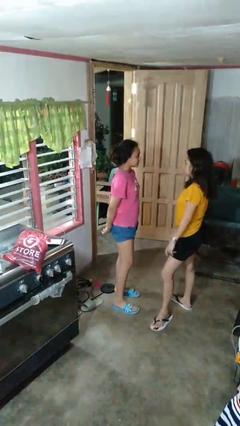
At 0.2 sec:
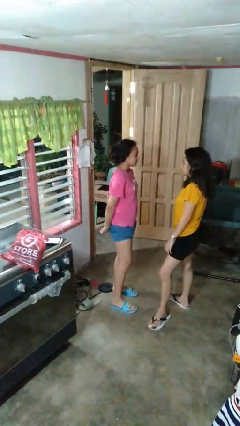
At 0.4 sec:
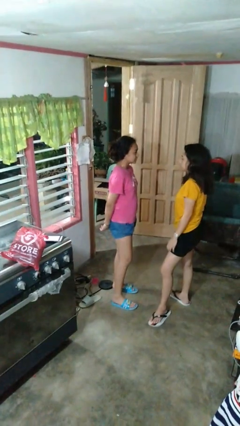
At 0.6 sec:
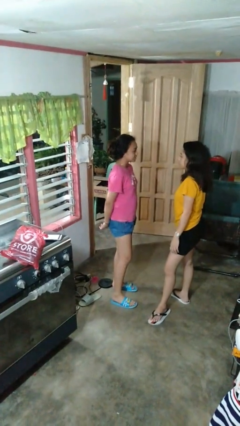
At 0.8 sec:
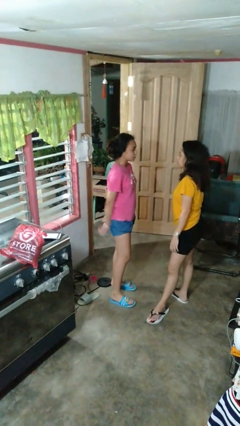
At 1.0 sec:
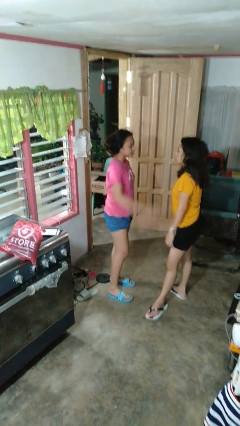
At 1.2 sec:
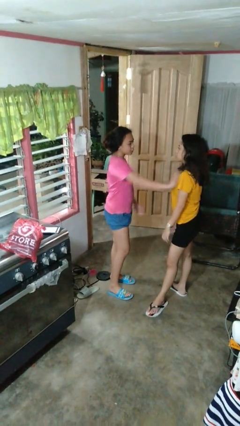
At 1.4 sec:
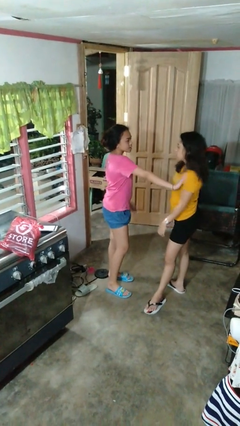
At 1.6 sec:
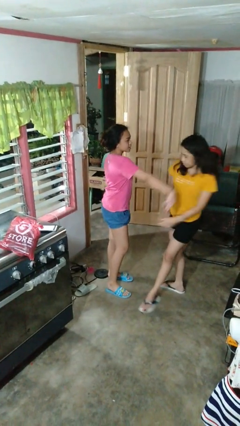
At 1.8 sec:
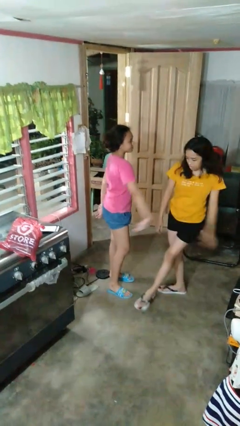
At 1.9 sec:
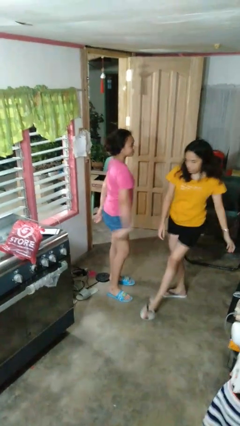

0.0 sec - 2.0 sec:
person shoves person

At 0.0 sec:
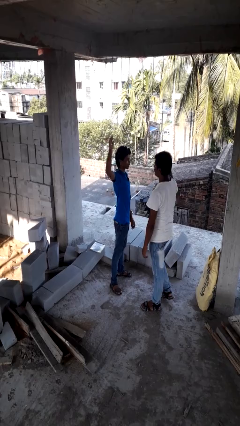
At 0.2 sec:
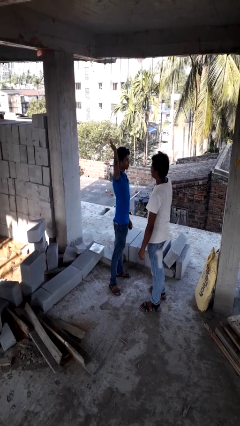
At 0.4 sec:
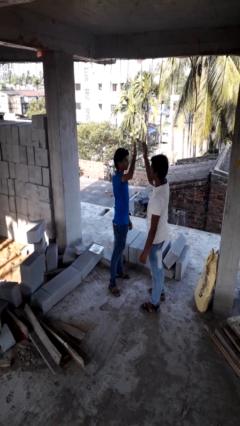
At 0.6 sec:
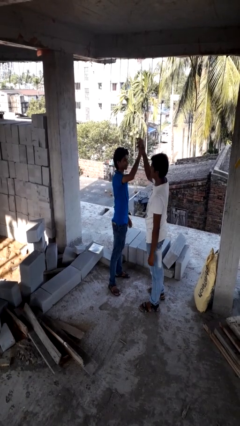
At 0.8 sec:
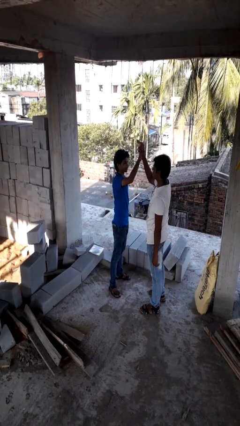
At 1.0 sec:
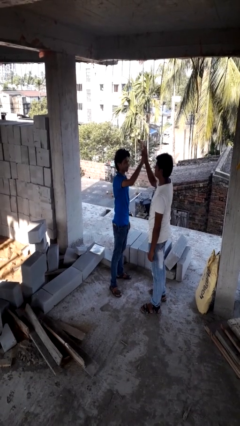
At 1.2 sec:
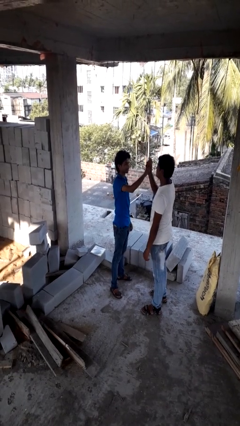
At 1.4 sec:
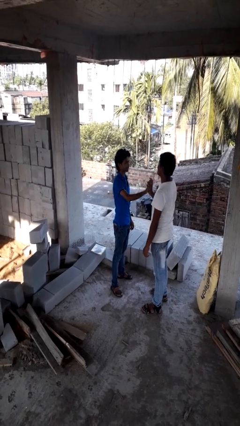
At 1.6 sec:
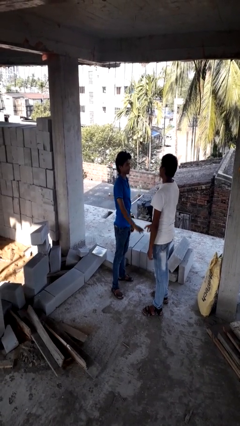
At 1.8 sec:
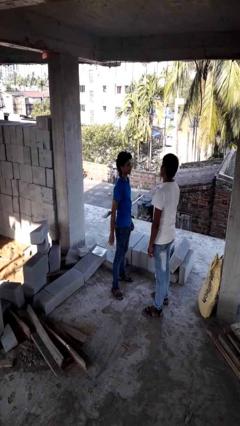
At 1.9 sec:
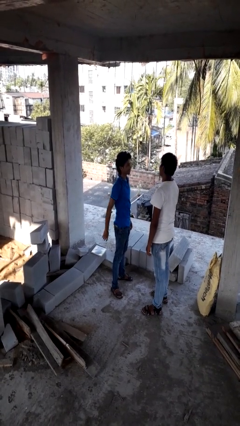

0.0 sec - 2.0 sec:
person highfives hand

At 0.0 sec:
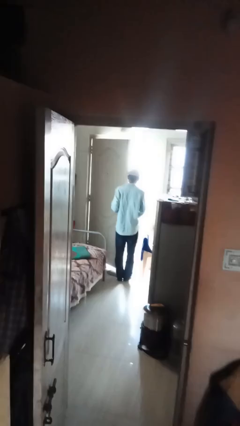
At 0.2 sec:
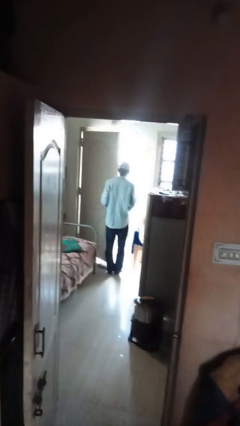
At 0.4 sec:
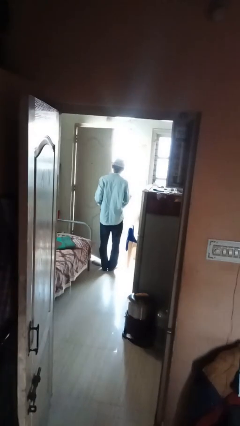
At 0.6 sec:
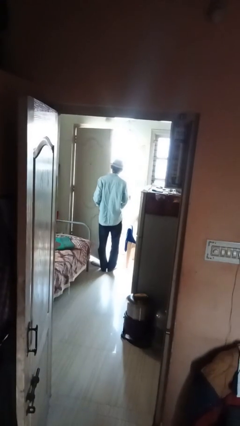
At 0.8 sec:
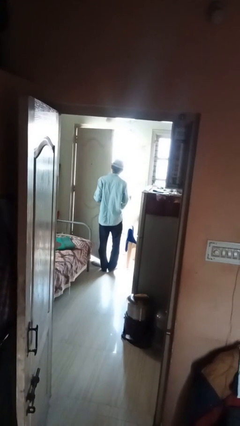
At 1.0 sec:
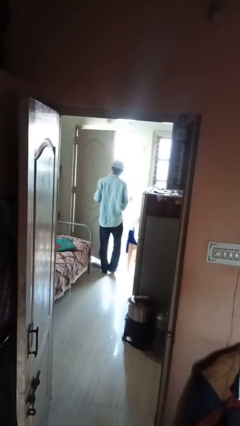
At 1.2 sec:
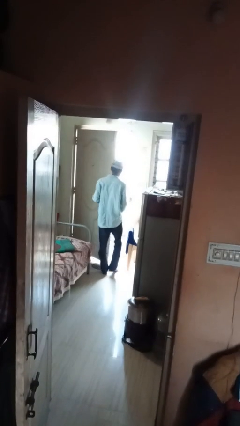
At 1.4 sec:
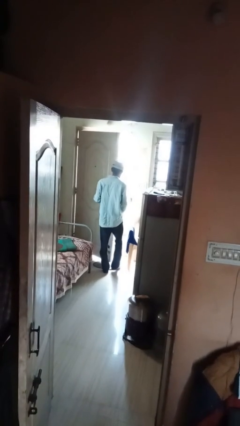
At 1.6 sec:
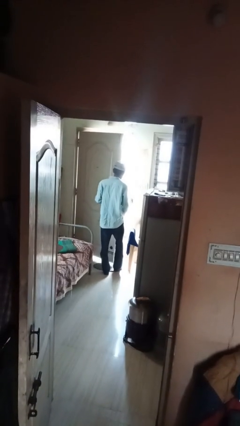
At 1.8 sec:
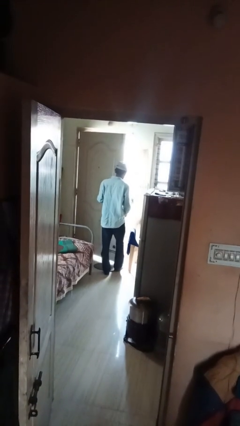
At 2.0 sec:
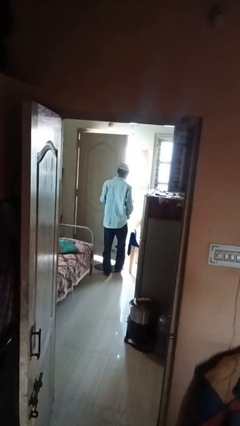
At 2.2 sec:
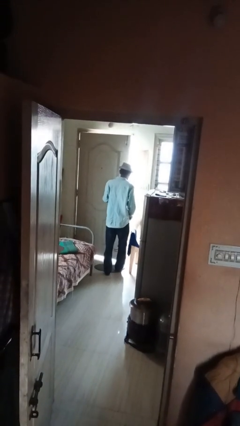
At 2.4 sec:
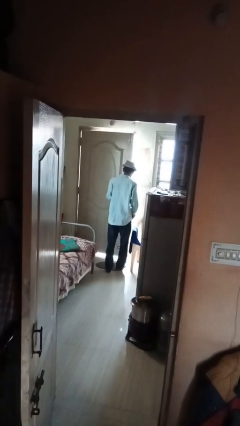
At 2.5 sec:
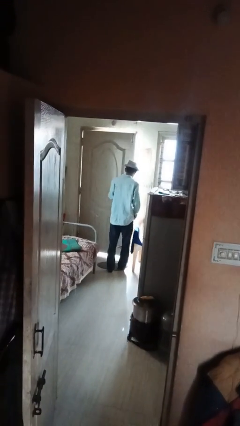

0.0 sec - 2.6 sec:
person opens facility door

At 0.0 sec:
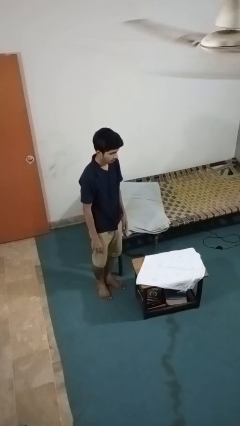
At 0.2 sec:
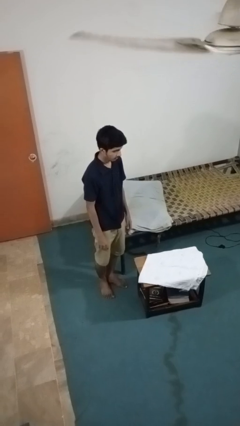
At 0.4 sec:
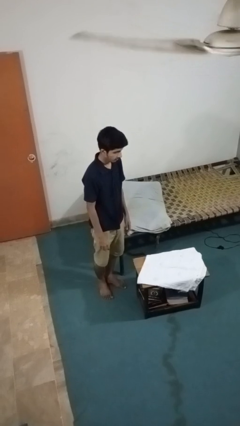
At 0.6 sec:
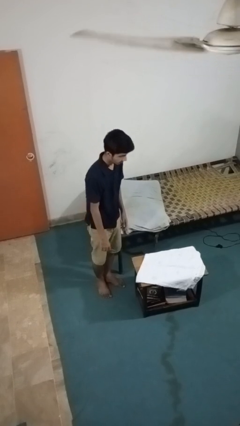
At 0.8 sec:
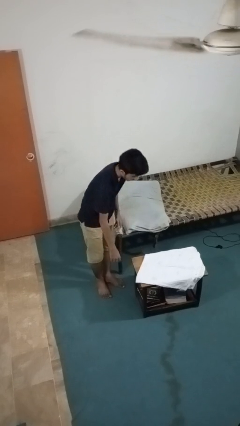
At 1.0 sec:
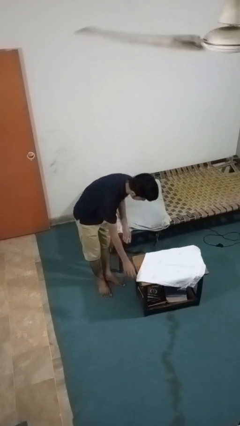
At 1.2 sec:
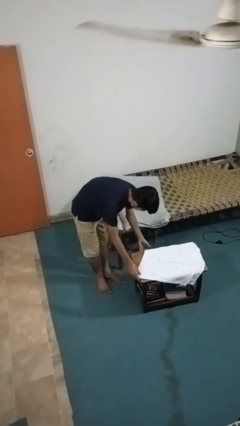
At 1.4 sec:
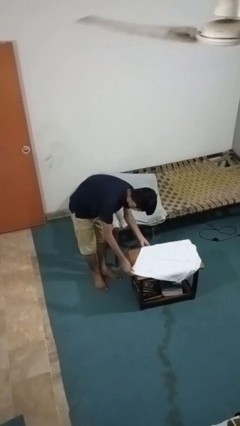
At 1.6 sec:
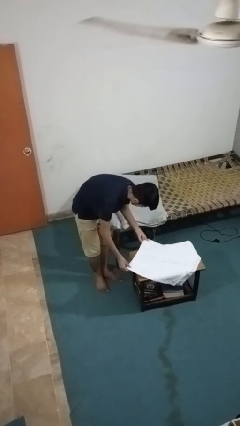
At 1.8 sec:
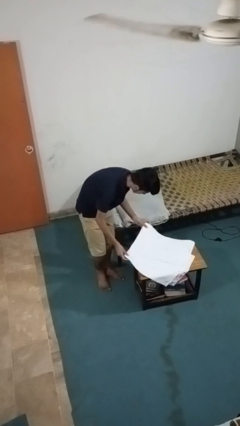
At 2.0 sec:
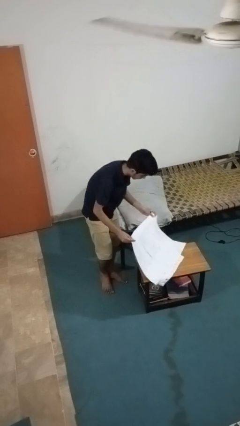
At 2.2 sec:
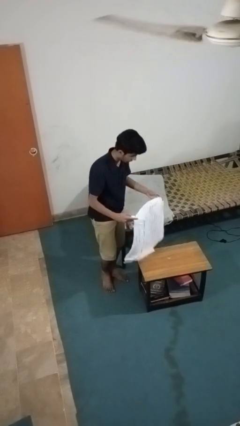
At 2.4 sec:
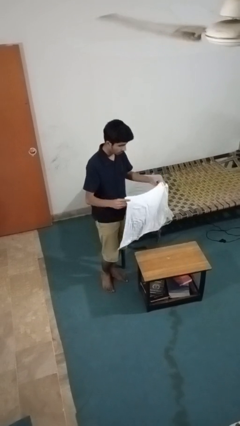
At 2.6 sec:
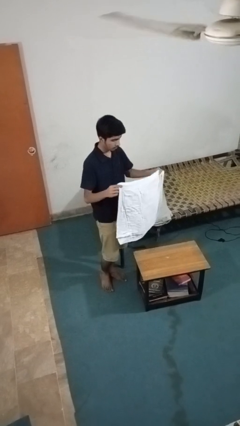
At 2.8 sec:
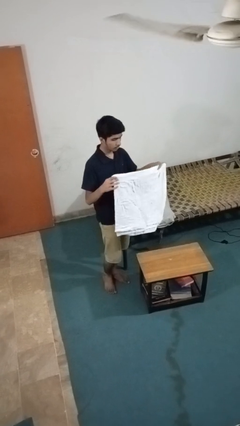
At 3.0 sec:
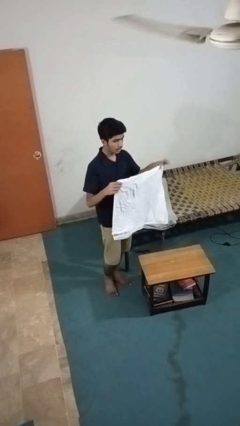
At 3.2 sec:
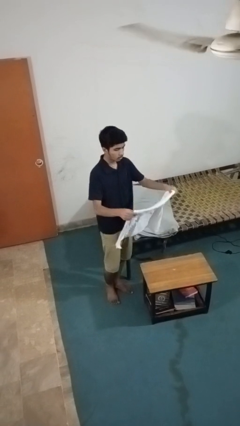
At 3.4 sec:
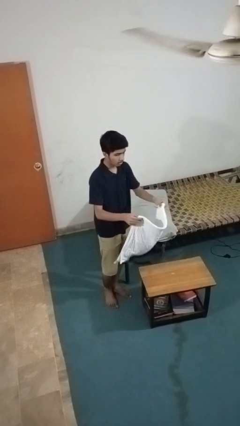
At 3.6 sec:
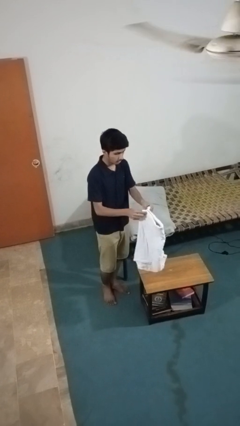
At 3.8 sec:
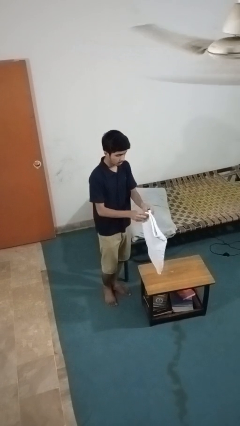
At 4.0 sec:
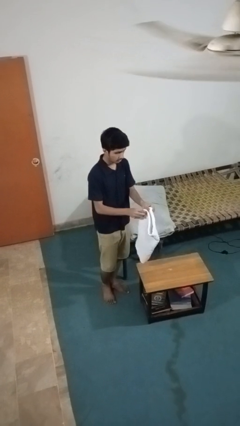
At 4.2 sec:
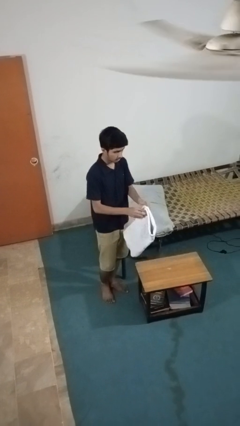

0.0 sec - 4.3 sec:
person folds tablecloth

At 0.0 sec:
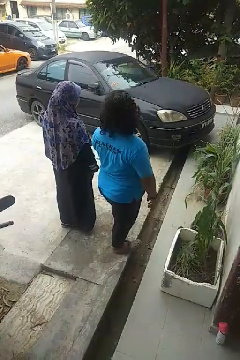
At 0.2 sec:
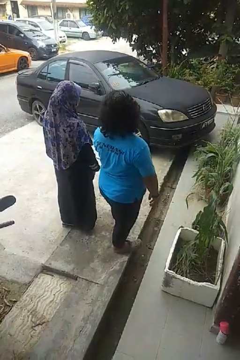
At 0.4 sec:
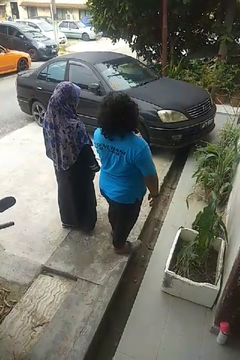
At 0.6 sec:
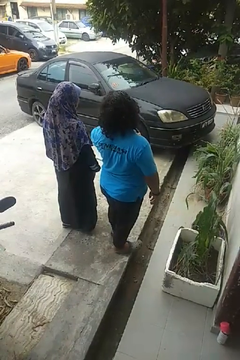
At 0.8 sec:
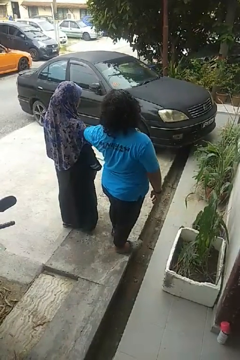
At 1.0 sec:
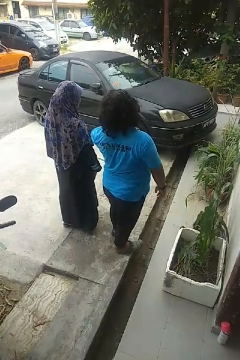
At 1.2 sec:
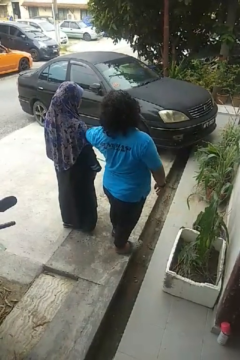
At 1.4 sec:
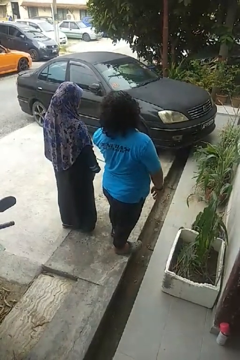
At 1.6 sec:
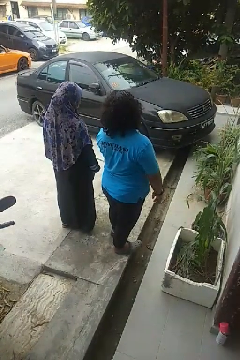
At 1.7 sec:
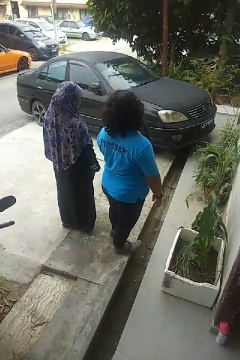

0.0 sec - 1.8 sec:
person nudges person with elbow

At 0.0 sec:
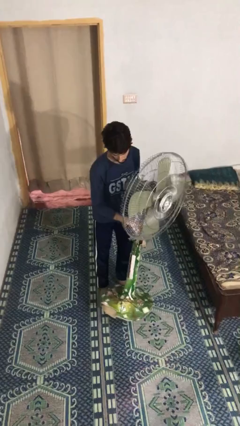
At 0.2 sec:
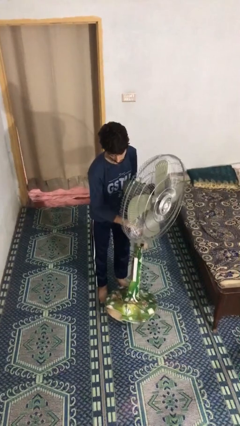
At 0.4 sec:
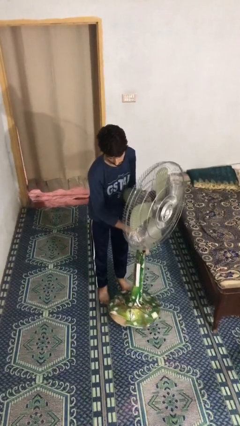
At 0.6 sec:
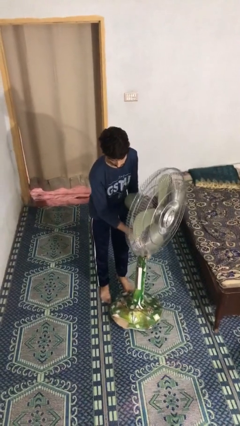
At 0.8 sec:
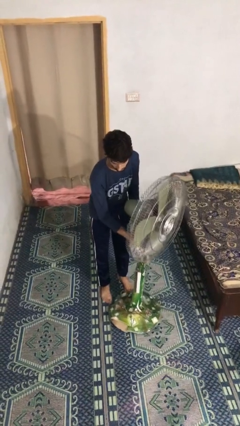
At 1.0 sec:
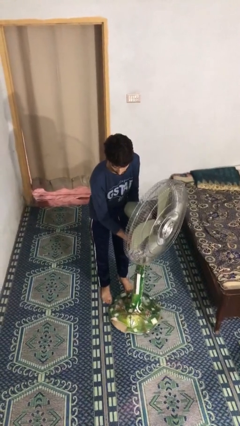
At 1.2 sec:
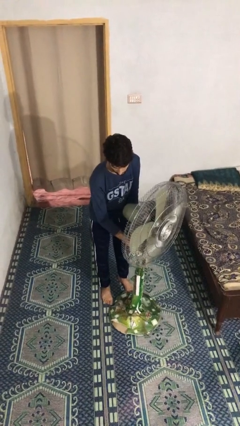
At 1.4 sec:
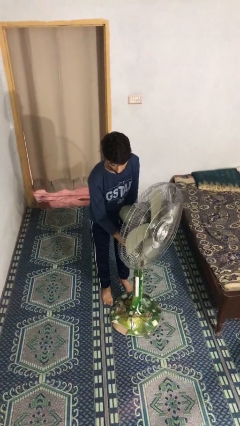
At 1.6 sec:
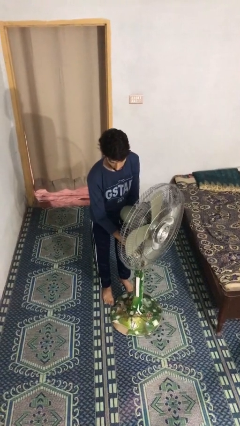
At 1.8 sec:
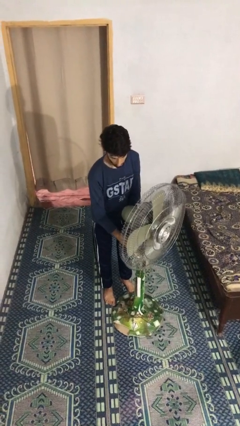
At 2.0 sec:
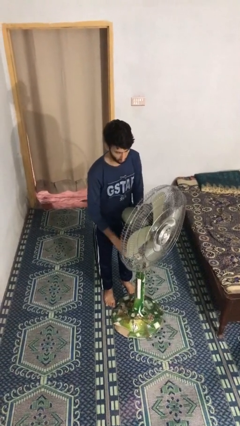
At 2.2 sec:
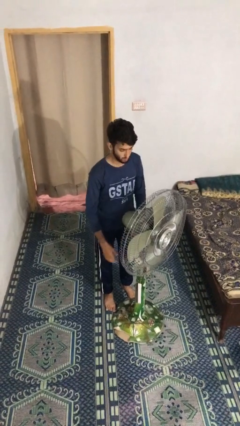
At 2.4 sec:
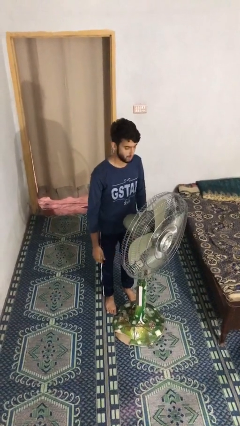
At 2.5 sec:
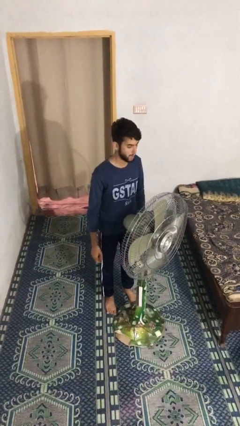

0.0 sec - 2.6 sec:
person puts down object on floor

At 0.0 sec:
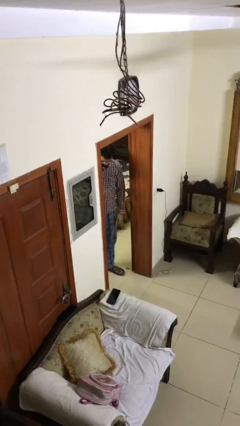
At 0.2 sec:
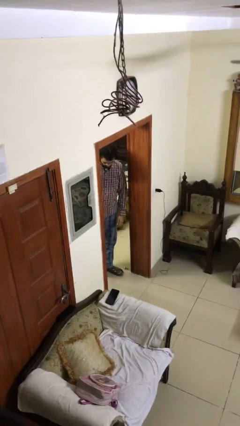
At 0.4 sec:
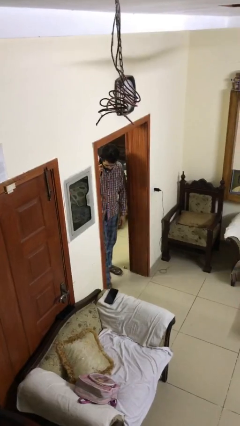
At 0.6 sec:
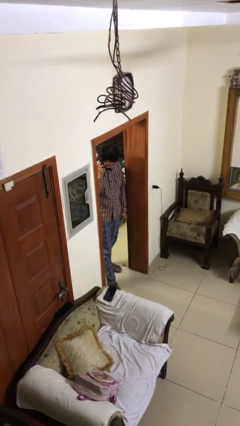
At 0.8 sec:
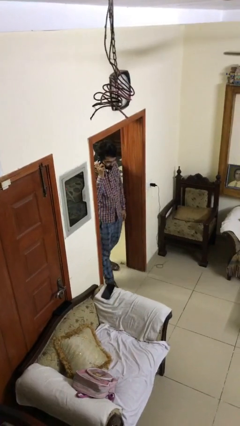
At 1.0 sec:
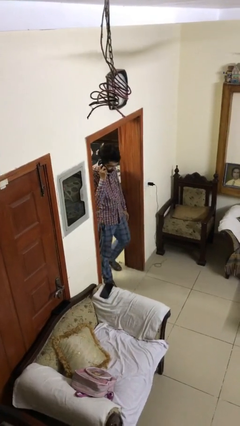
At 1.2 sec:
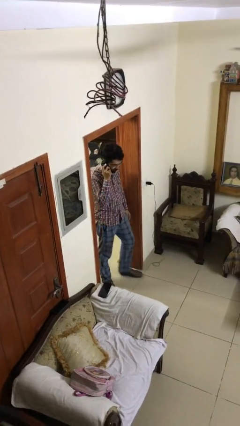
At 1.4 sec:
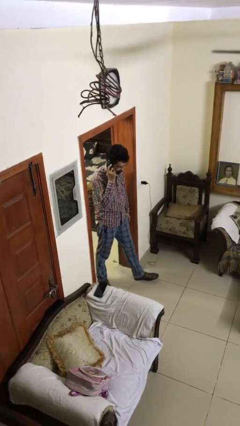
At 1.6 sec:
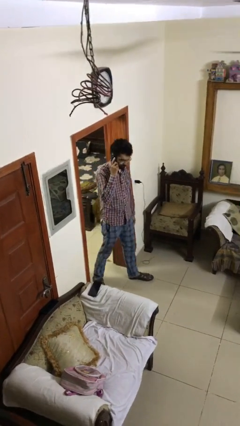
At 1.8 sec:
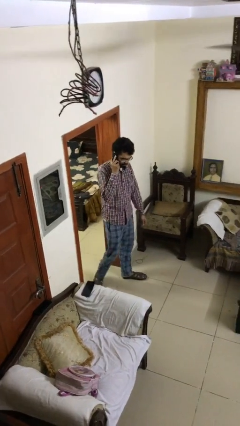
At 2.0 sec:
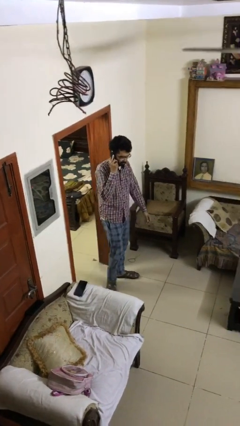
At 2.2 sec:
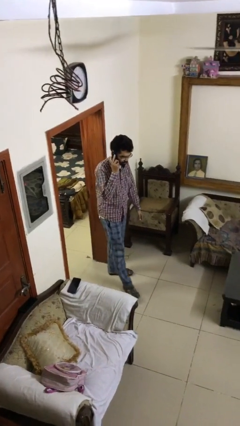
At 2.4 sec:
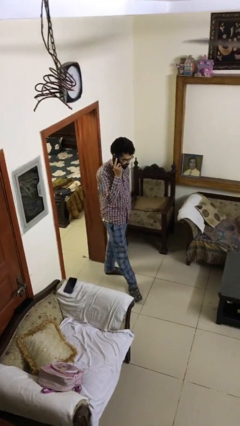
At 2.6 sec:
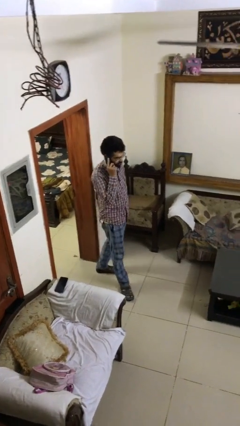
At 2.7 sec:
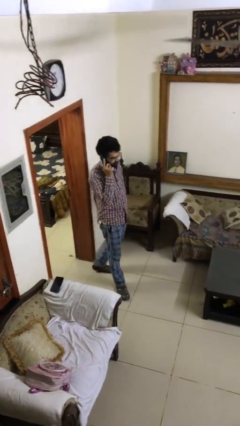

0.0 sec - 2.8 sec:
person enters scene through structure
